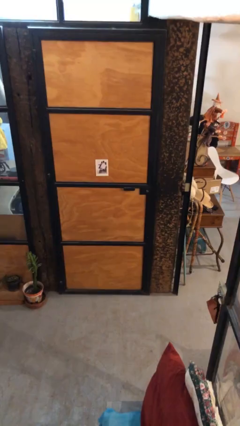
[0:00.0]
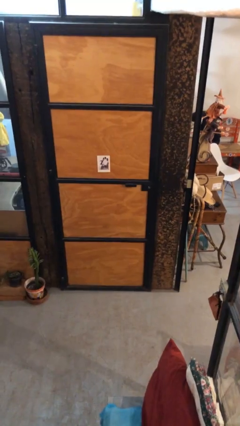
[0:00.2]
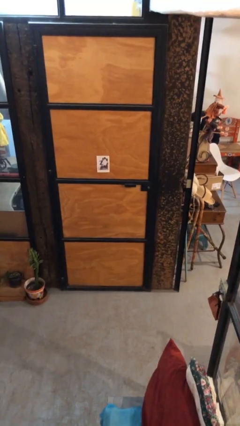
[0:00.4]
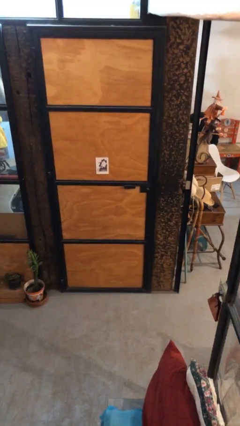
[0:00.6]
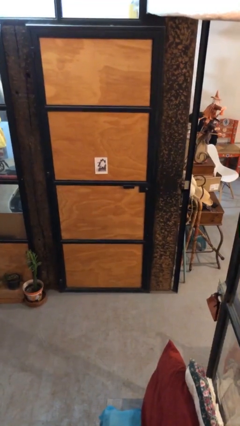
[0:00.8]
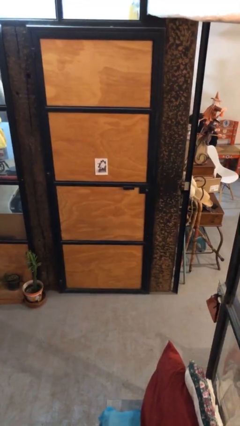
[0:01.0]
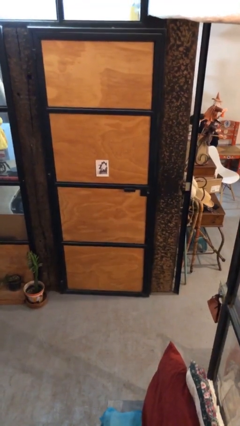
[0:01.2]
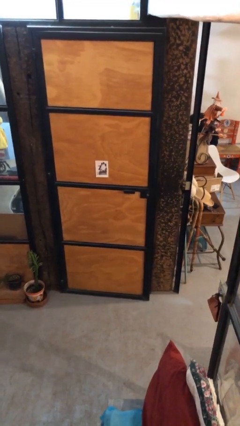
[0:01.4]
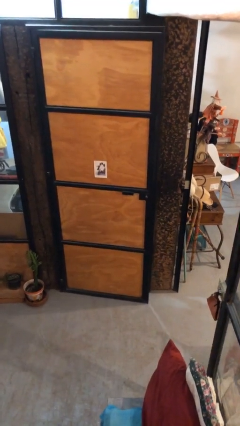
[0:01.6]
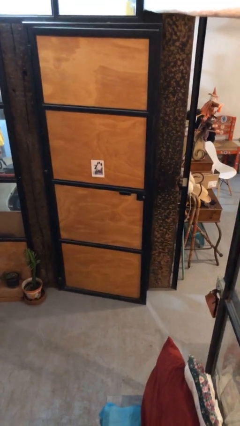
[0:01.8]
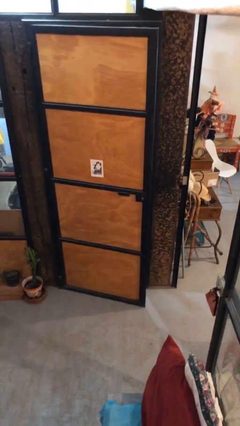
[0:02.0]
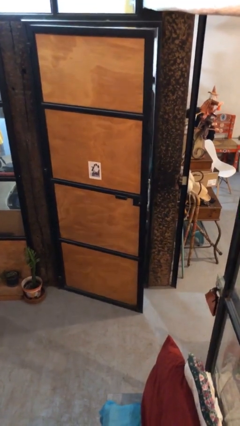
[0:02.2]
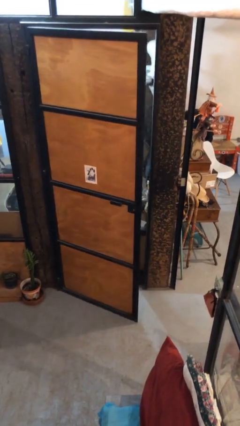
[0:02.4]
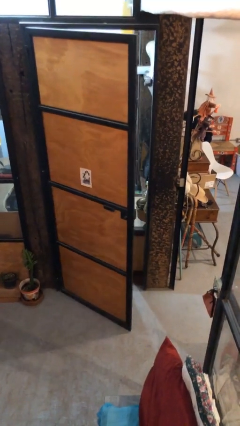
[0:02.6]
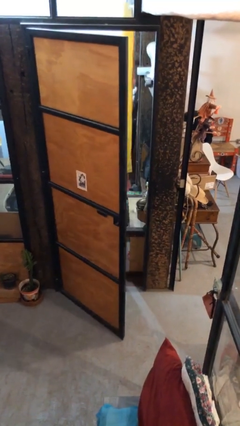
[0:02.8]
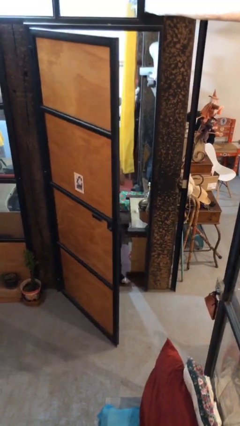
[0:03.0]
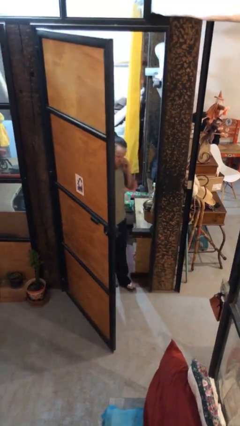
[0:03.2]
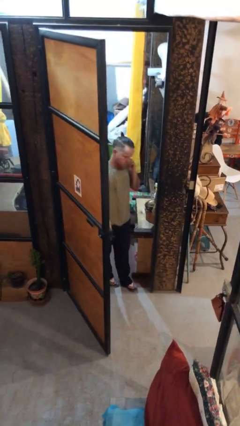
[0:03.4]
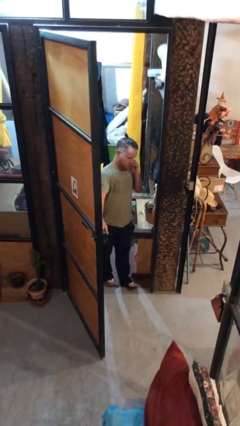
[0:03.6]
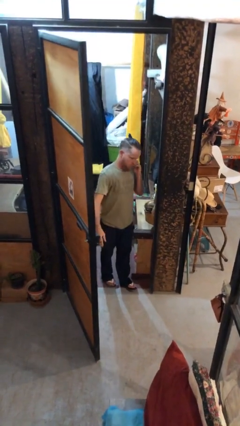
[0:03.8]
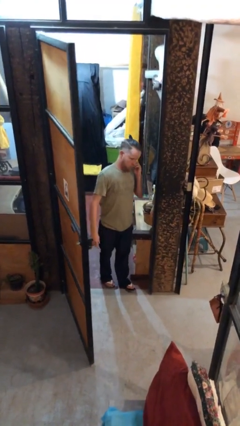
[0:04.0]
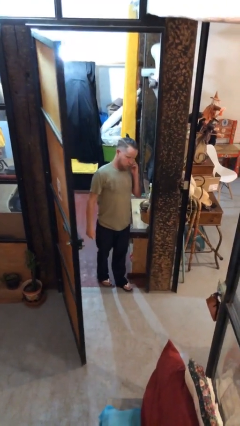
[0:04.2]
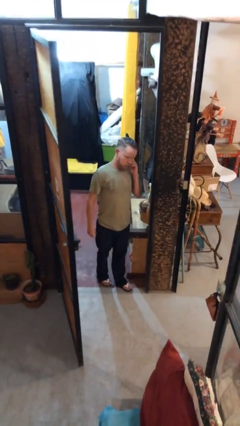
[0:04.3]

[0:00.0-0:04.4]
person opens facility door

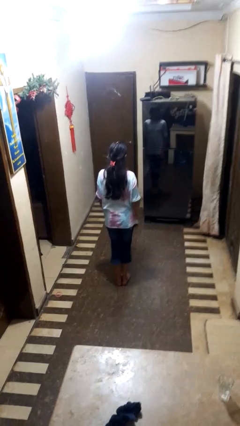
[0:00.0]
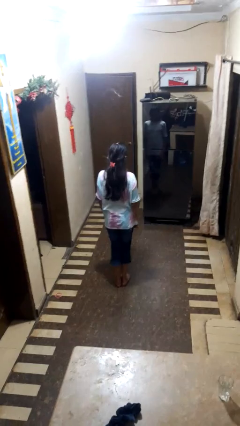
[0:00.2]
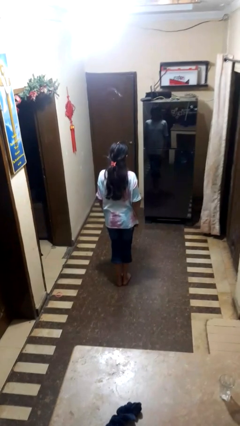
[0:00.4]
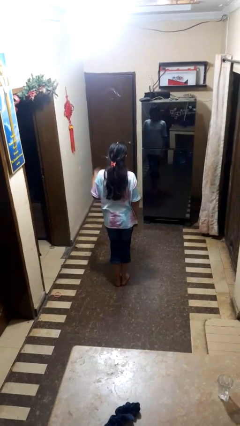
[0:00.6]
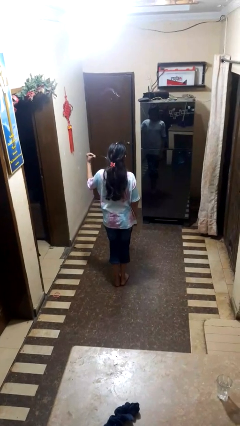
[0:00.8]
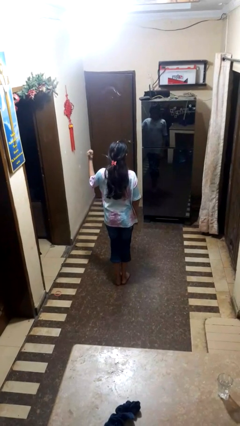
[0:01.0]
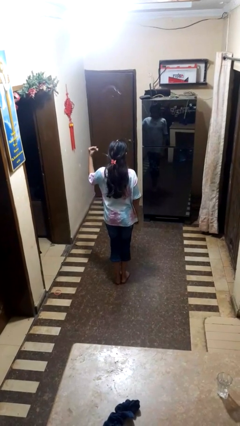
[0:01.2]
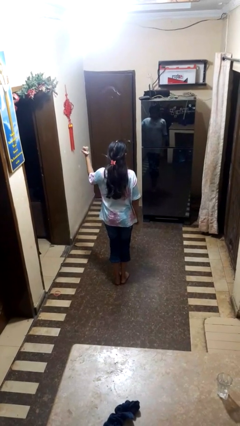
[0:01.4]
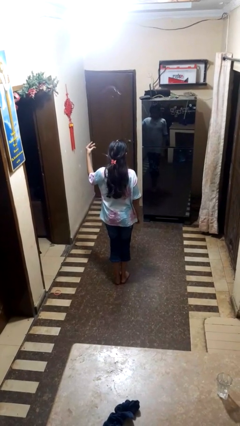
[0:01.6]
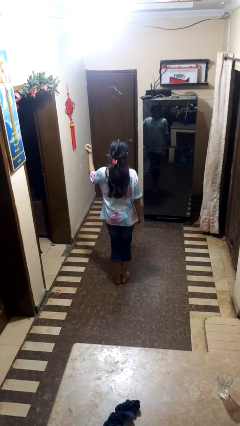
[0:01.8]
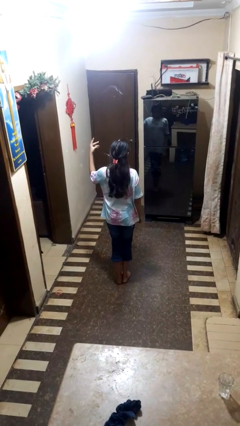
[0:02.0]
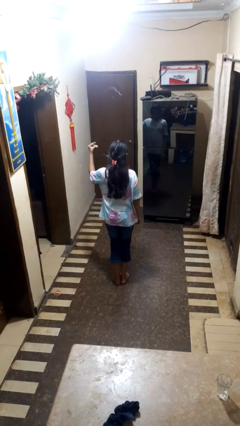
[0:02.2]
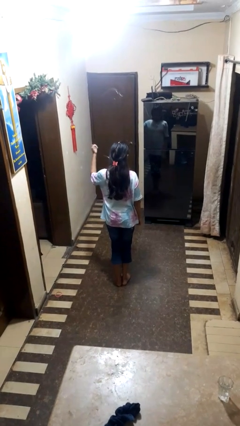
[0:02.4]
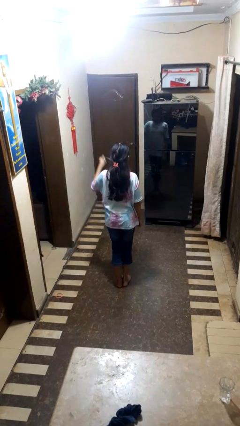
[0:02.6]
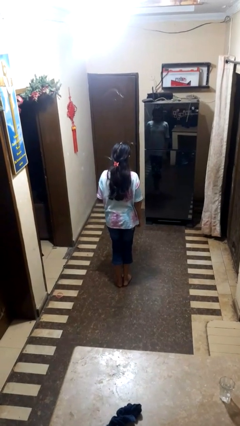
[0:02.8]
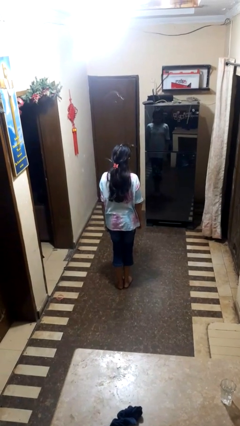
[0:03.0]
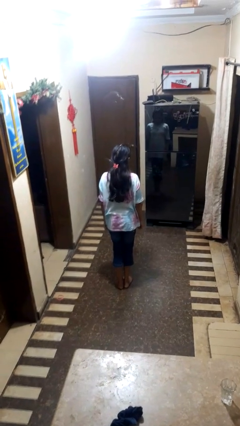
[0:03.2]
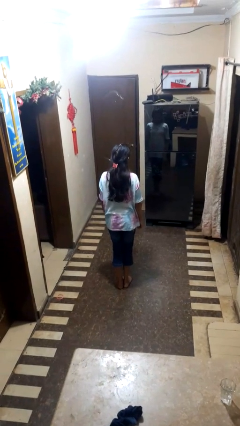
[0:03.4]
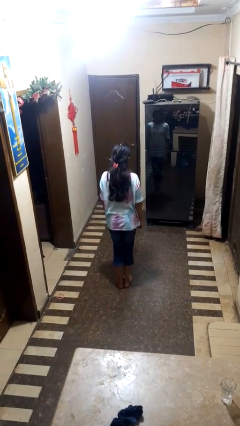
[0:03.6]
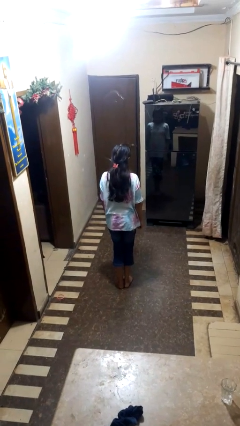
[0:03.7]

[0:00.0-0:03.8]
person snaps fingers

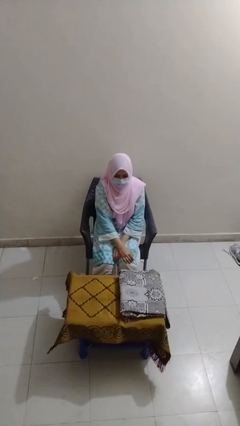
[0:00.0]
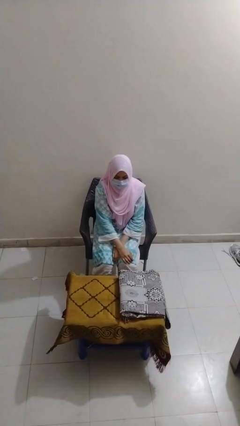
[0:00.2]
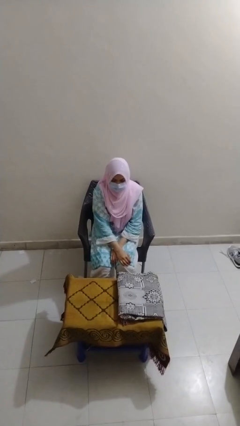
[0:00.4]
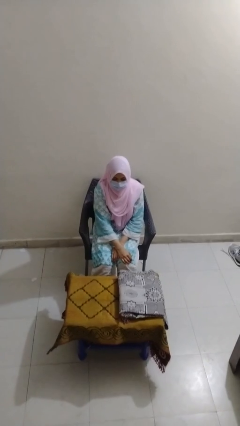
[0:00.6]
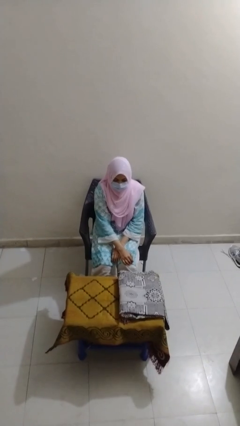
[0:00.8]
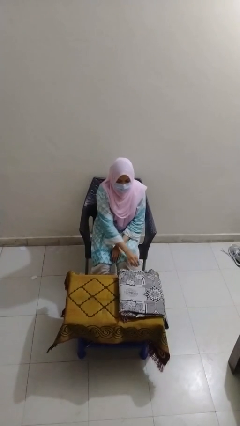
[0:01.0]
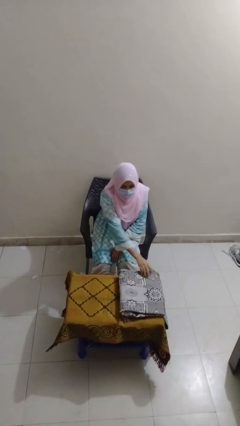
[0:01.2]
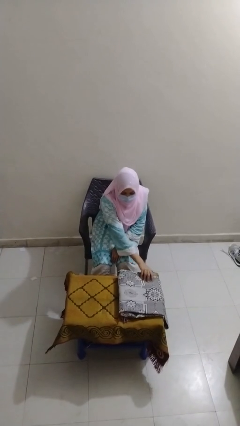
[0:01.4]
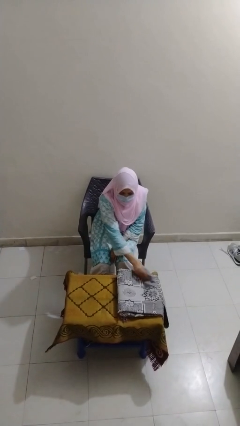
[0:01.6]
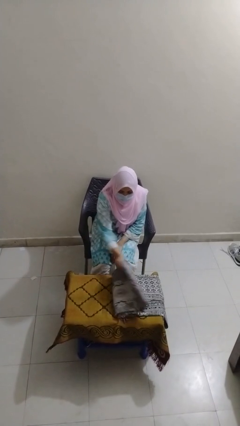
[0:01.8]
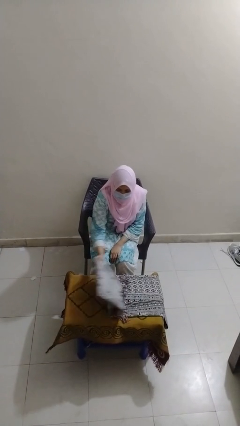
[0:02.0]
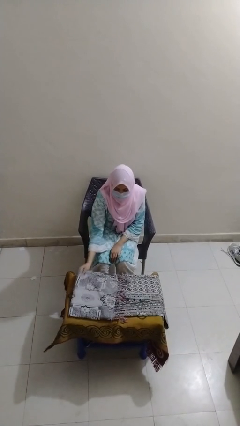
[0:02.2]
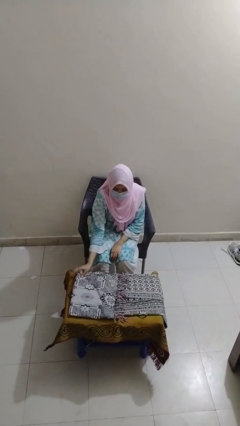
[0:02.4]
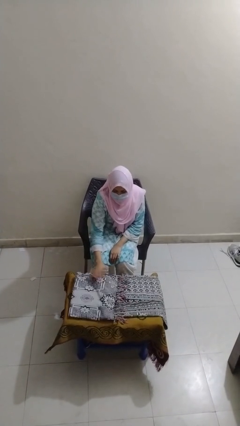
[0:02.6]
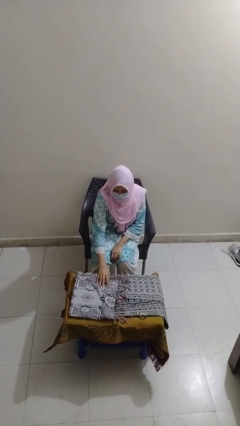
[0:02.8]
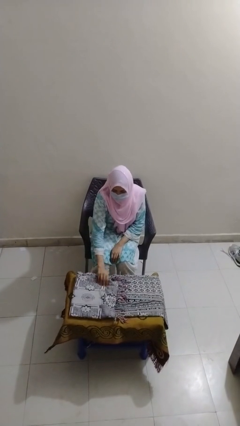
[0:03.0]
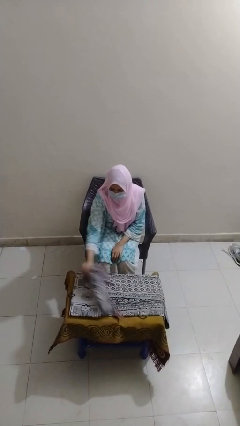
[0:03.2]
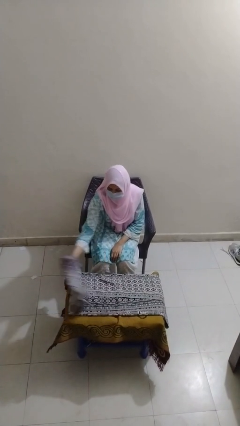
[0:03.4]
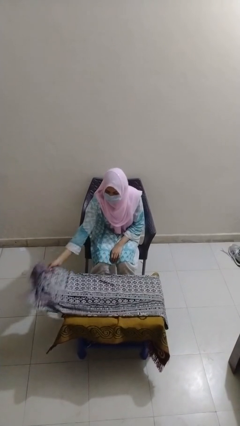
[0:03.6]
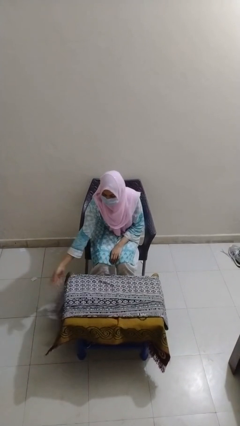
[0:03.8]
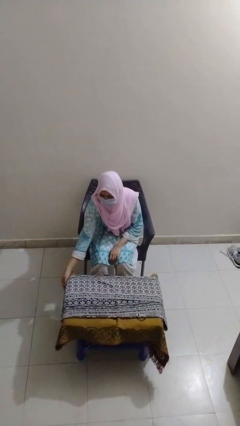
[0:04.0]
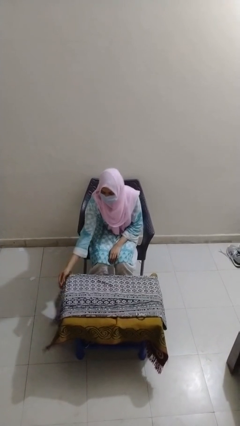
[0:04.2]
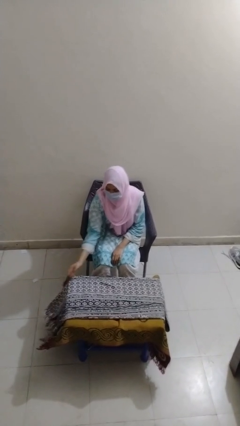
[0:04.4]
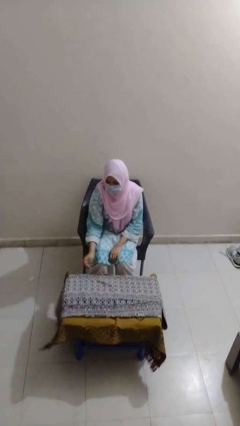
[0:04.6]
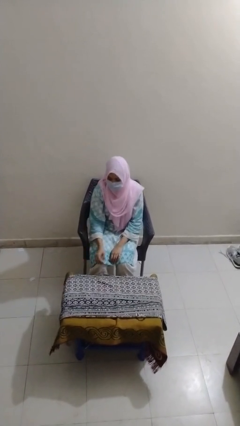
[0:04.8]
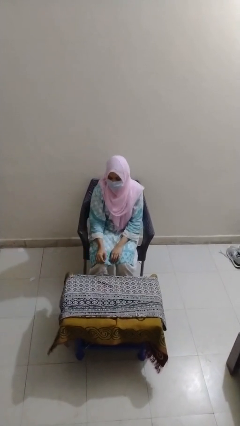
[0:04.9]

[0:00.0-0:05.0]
person unfolds blanket

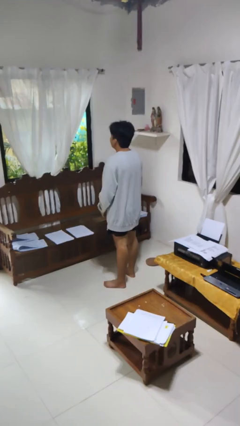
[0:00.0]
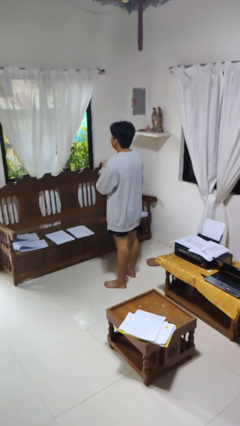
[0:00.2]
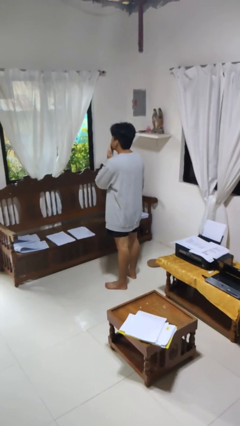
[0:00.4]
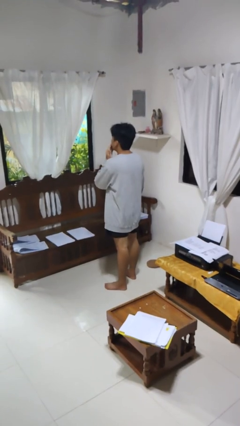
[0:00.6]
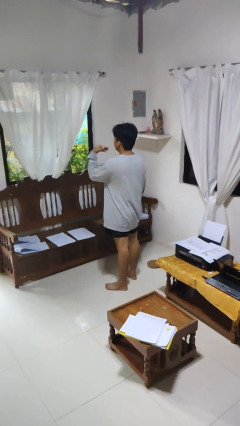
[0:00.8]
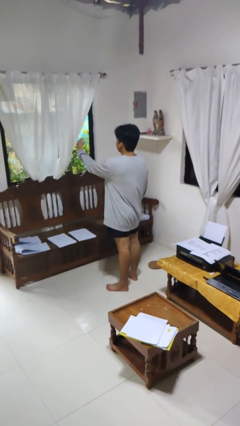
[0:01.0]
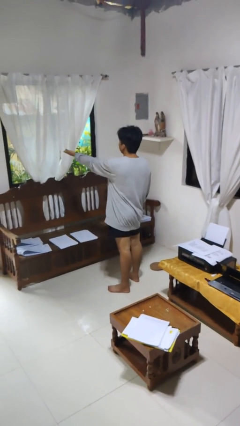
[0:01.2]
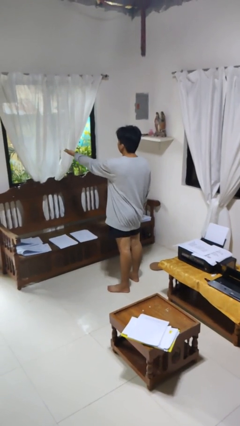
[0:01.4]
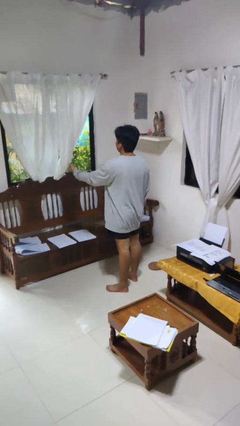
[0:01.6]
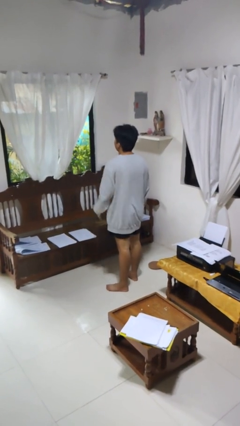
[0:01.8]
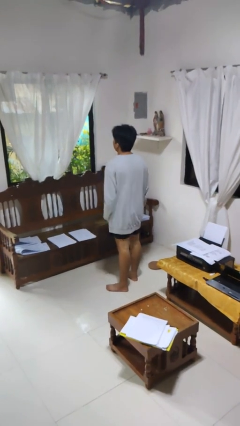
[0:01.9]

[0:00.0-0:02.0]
person gestures blow kiss

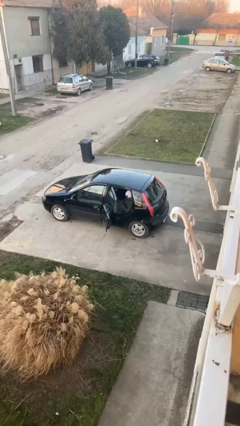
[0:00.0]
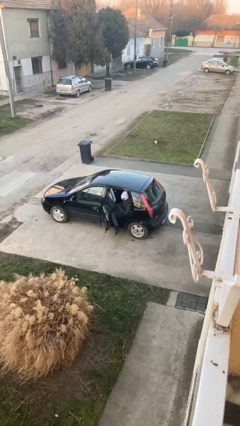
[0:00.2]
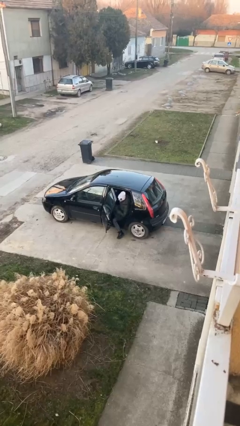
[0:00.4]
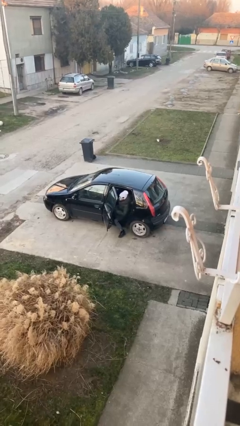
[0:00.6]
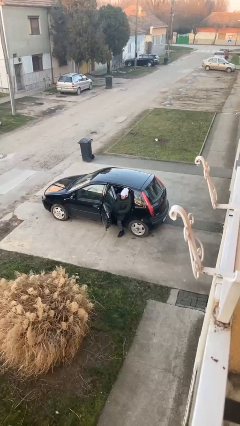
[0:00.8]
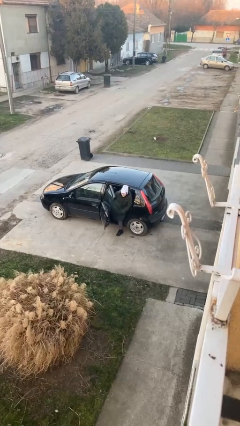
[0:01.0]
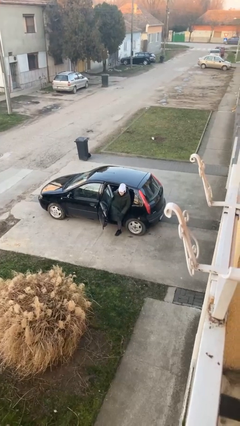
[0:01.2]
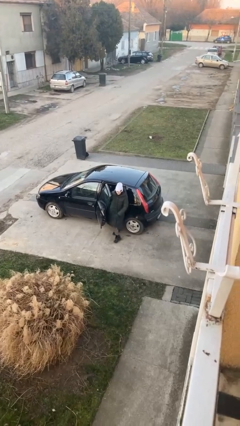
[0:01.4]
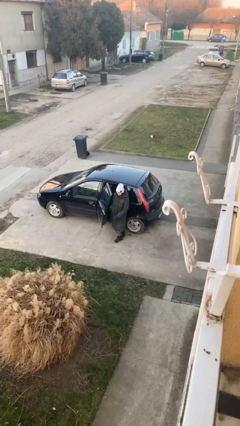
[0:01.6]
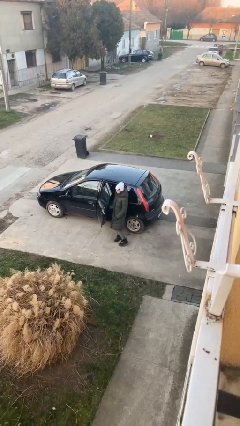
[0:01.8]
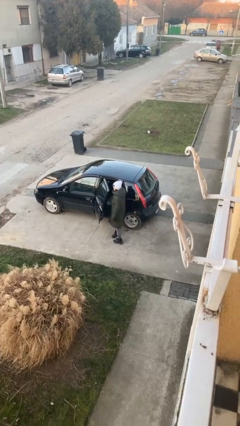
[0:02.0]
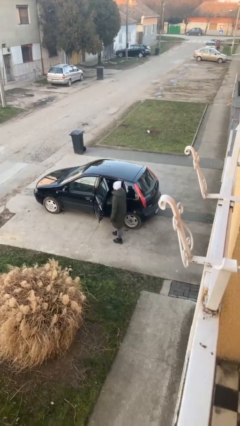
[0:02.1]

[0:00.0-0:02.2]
person exits car
